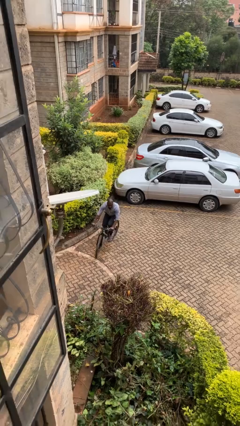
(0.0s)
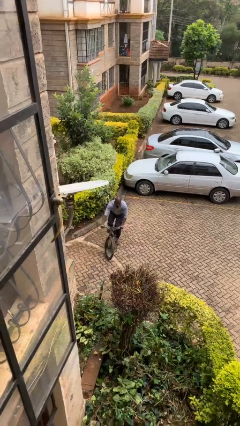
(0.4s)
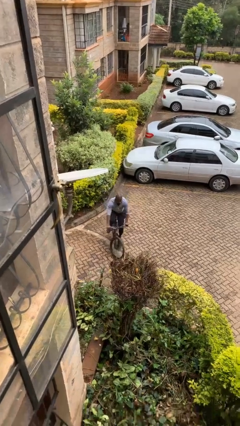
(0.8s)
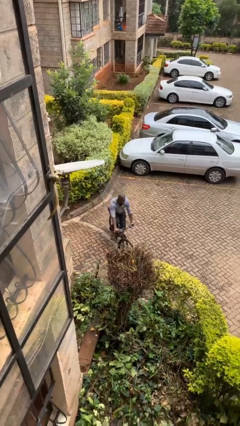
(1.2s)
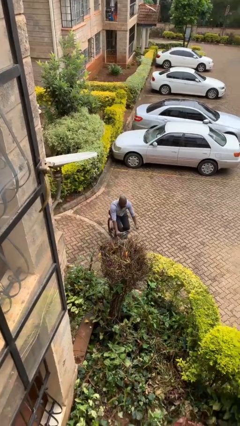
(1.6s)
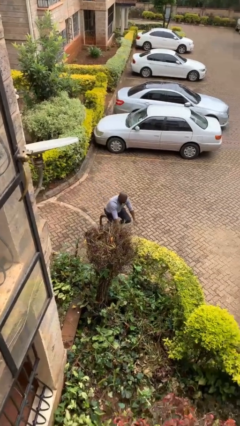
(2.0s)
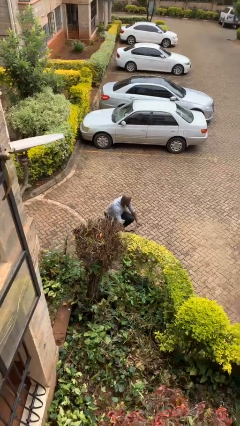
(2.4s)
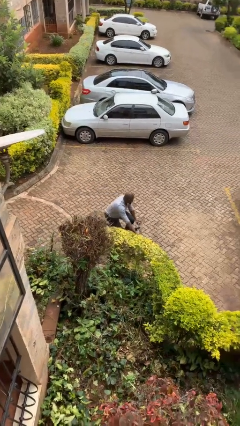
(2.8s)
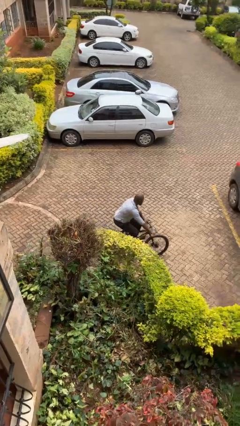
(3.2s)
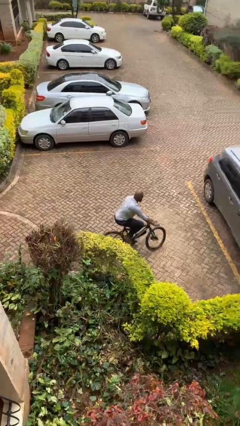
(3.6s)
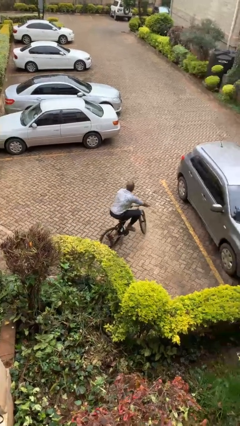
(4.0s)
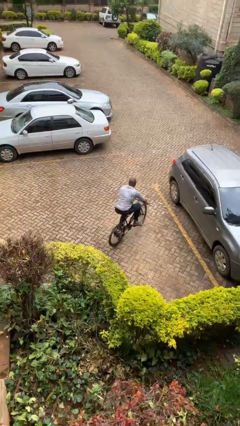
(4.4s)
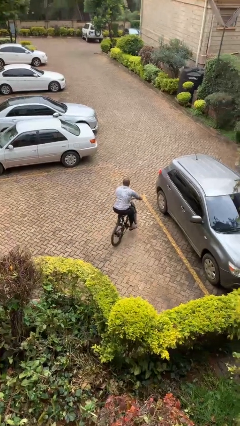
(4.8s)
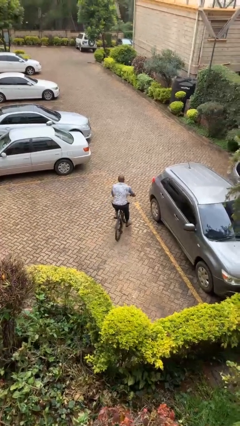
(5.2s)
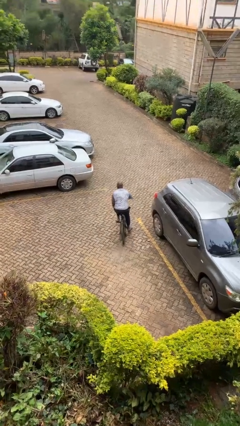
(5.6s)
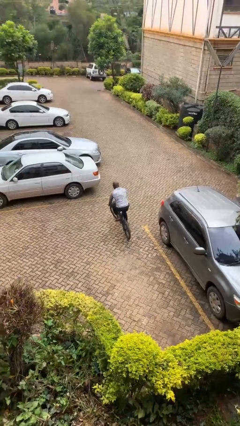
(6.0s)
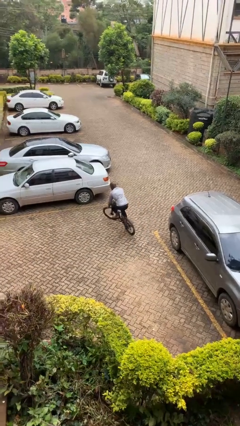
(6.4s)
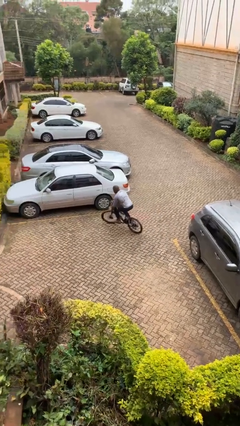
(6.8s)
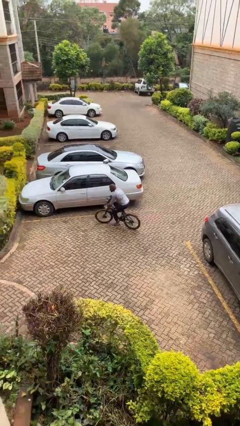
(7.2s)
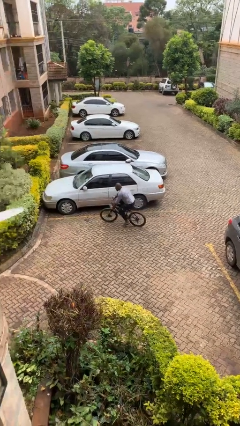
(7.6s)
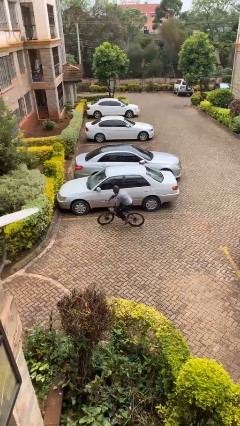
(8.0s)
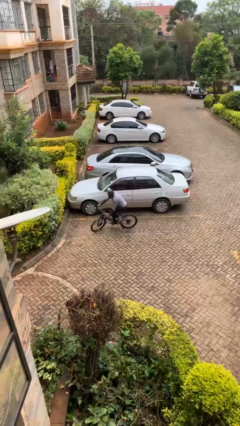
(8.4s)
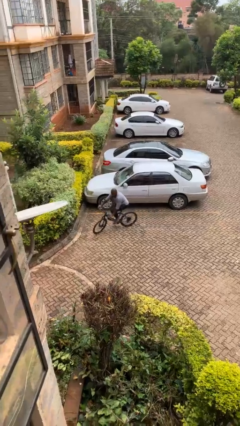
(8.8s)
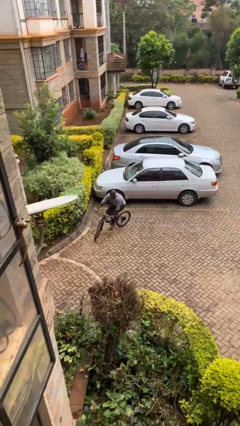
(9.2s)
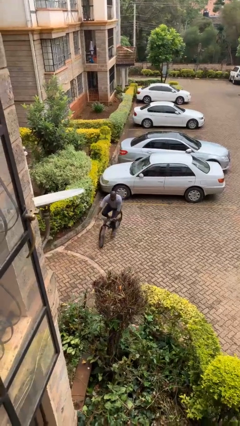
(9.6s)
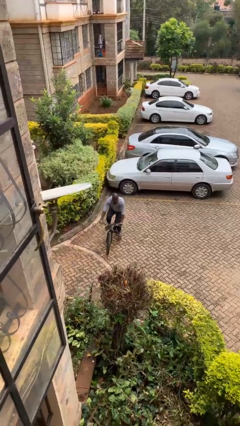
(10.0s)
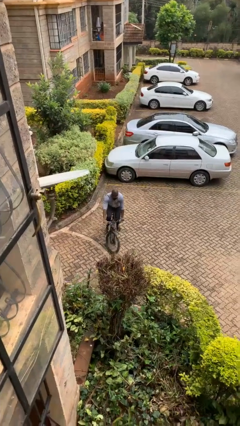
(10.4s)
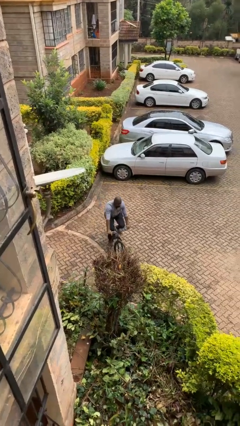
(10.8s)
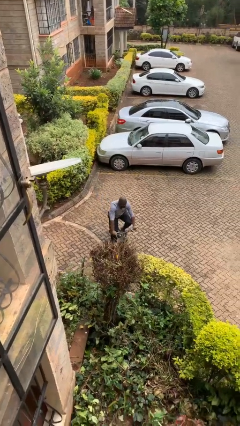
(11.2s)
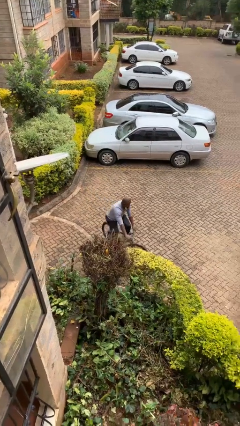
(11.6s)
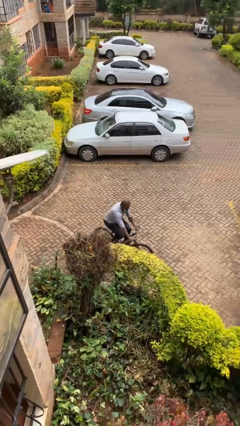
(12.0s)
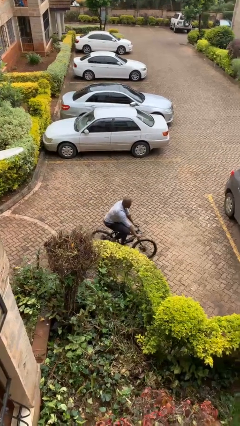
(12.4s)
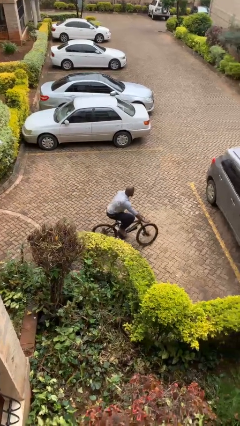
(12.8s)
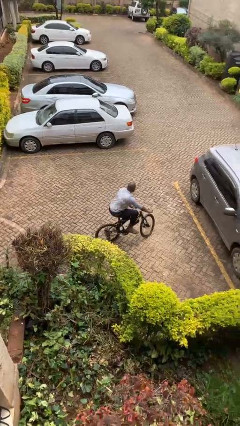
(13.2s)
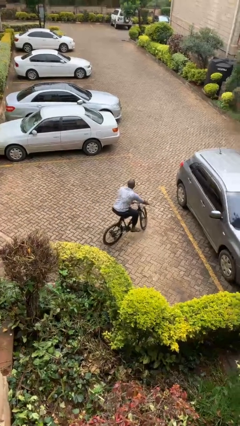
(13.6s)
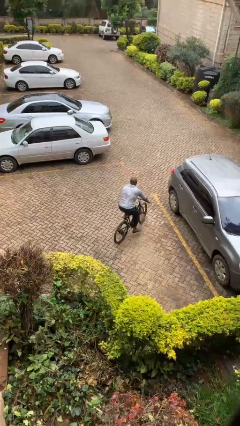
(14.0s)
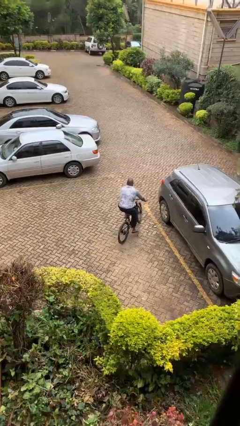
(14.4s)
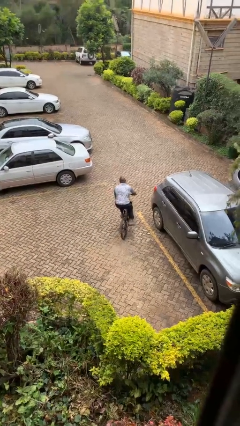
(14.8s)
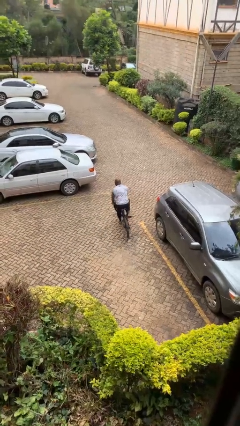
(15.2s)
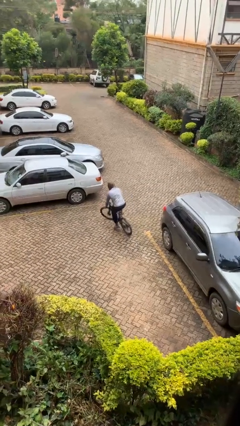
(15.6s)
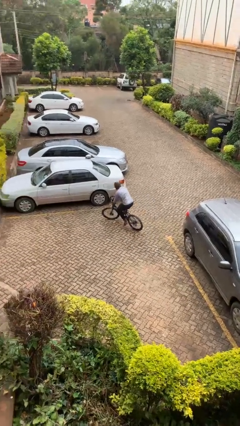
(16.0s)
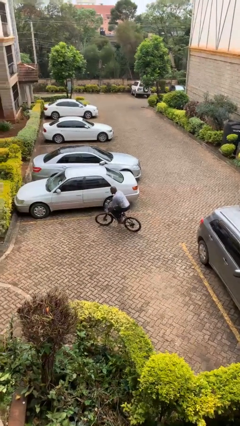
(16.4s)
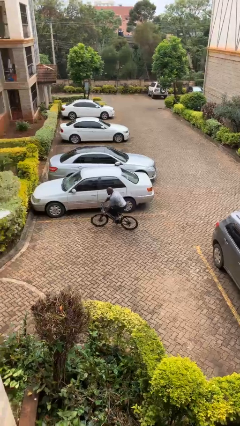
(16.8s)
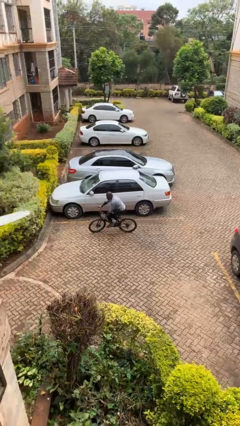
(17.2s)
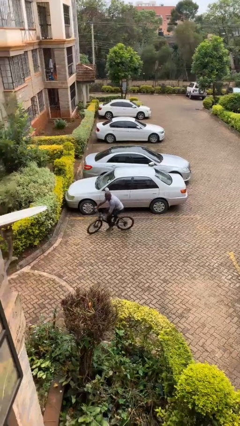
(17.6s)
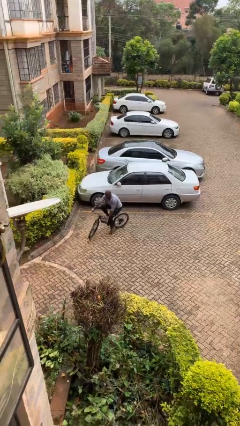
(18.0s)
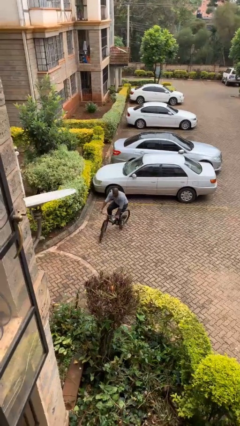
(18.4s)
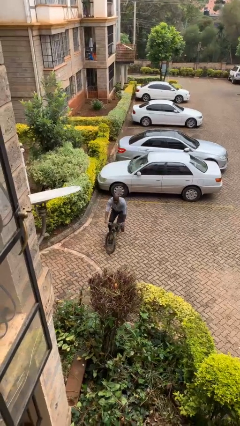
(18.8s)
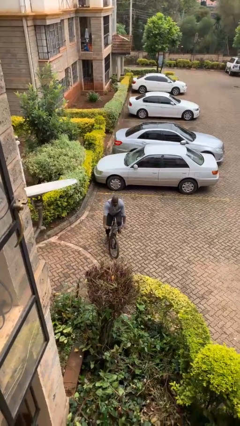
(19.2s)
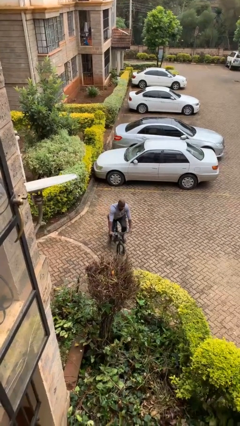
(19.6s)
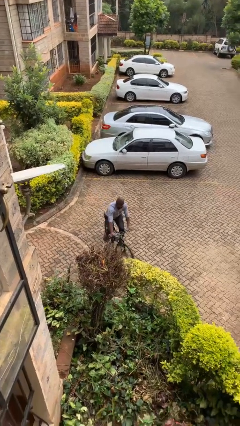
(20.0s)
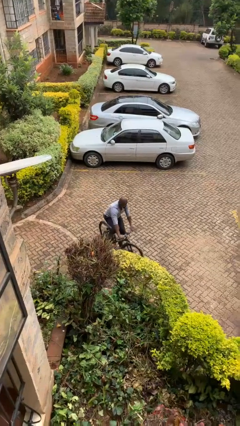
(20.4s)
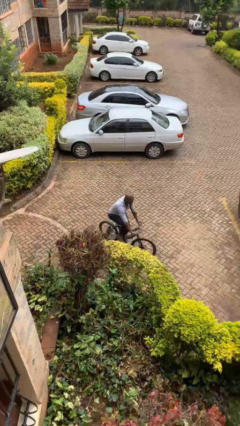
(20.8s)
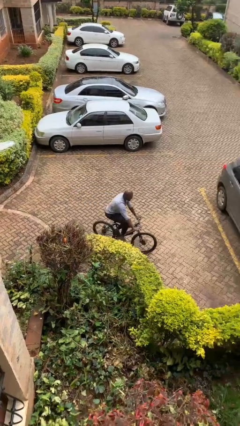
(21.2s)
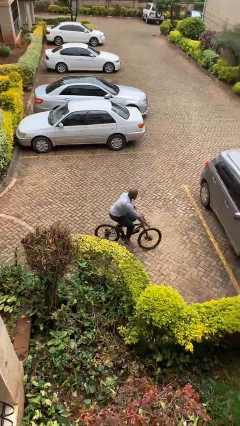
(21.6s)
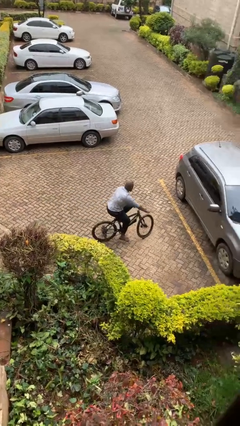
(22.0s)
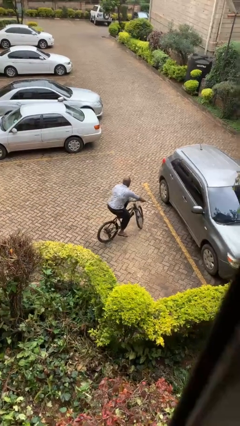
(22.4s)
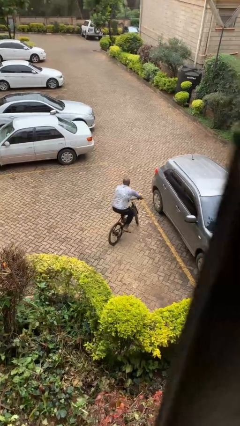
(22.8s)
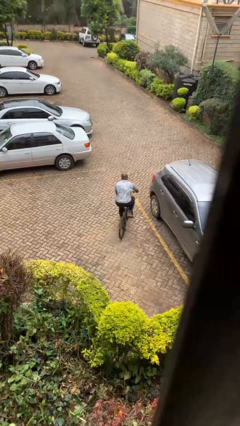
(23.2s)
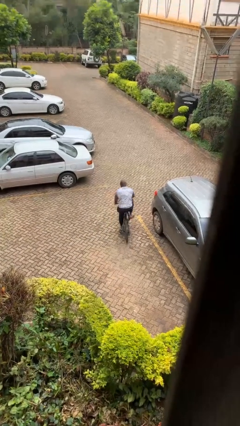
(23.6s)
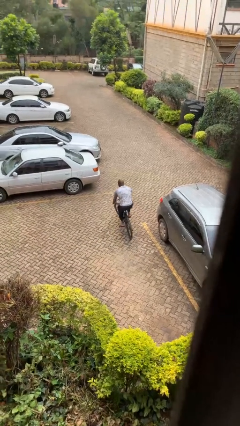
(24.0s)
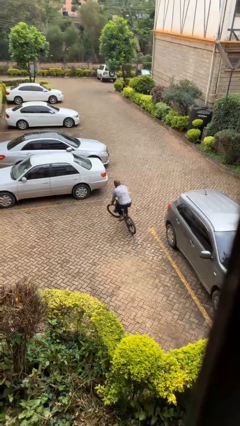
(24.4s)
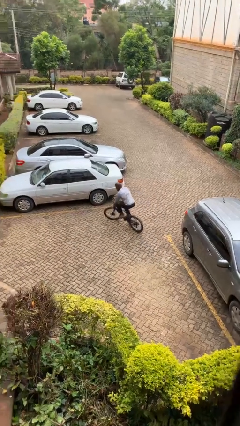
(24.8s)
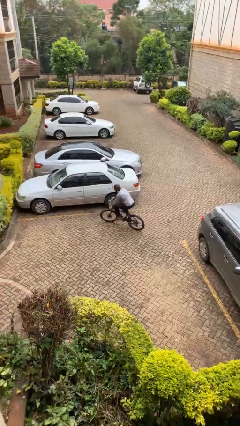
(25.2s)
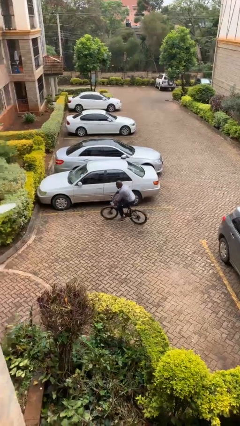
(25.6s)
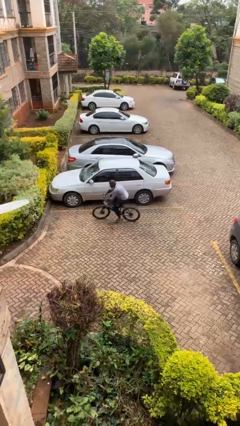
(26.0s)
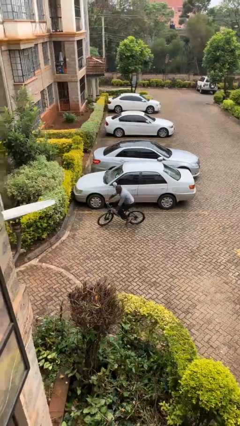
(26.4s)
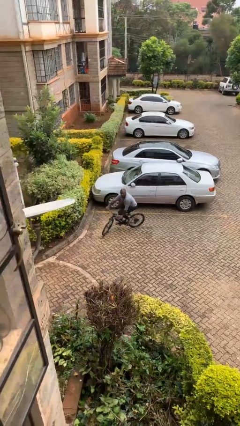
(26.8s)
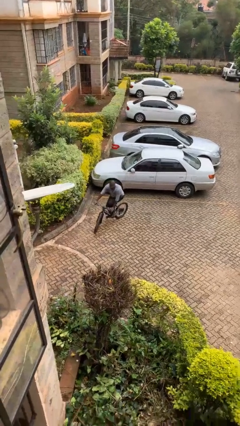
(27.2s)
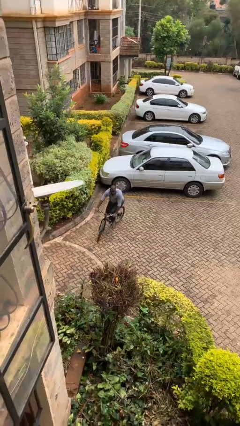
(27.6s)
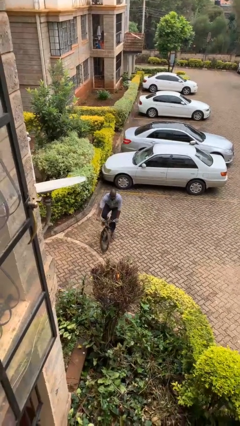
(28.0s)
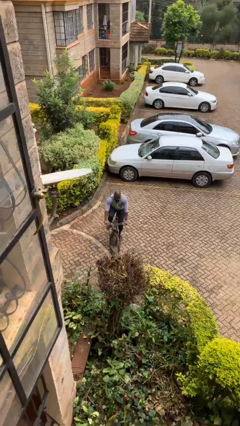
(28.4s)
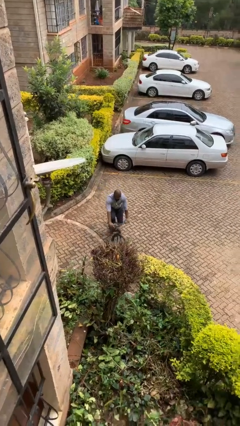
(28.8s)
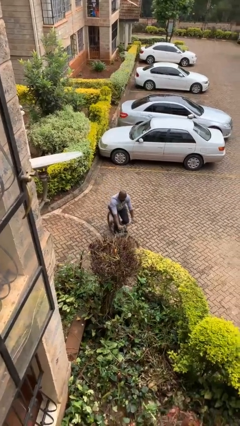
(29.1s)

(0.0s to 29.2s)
person rides bicycle

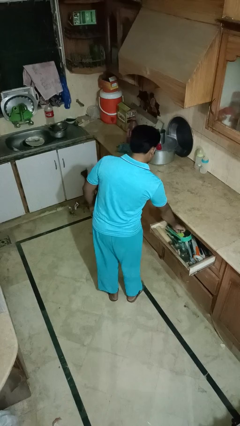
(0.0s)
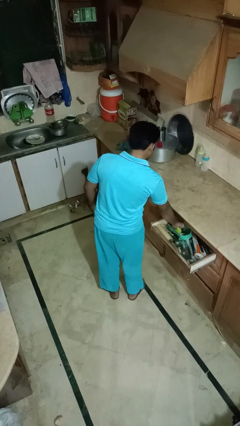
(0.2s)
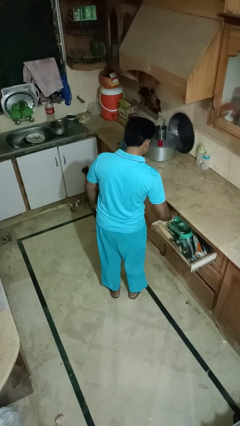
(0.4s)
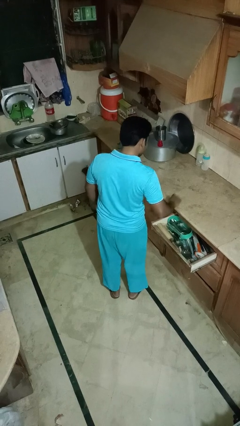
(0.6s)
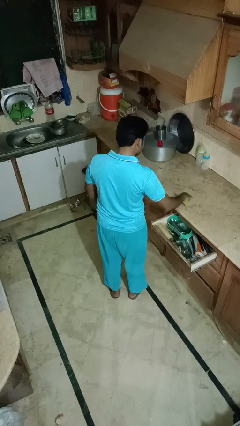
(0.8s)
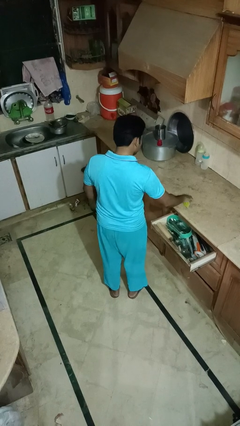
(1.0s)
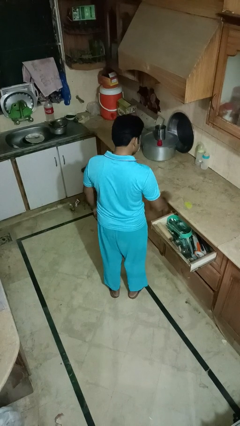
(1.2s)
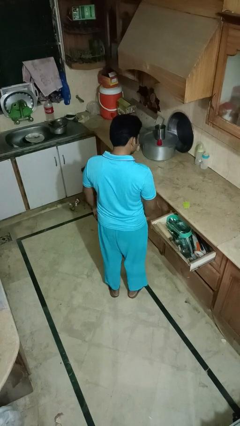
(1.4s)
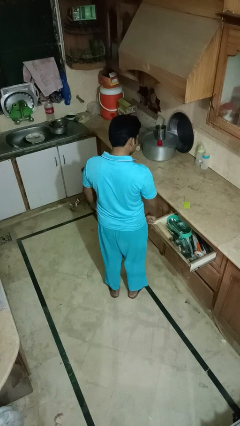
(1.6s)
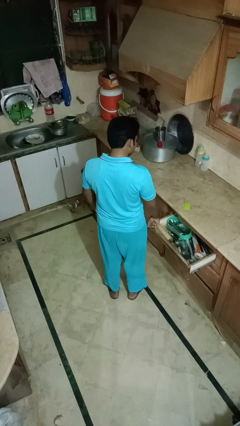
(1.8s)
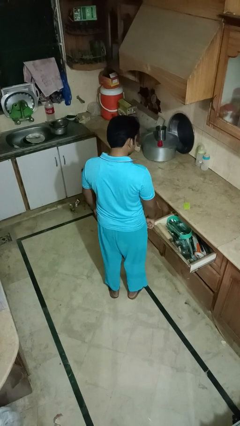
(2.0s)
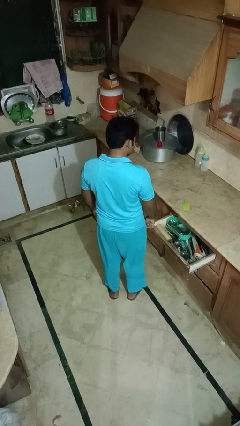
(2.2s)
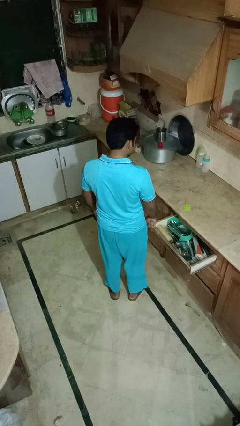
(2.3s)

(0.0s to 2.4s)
person takes object from kitchen drawer

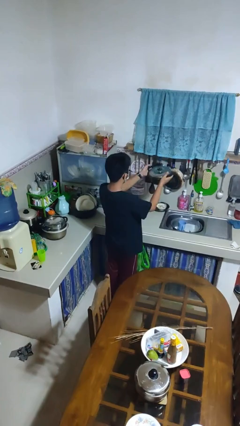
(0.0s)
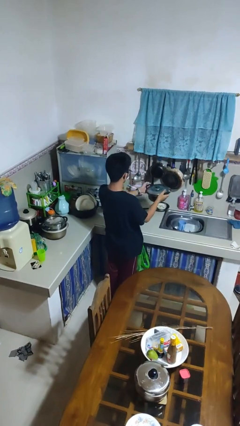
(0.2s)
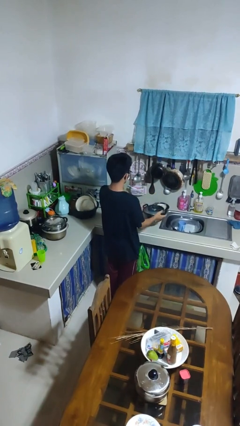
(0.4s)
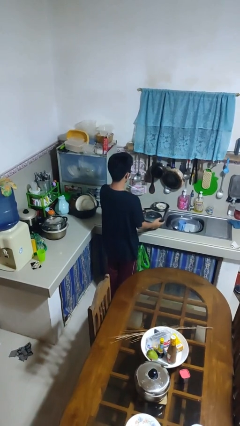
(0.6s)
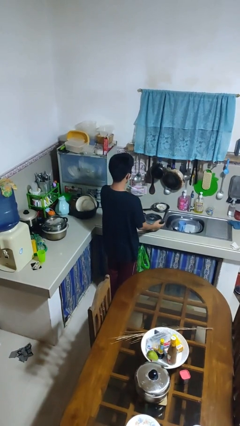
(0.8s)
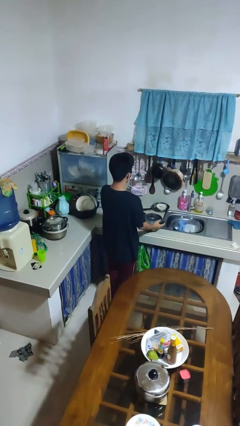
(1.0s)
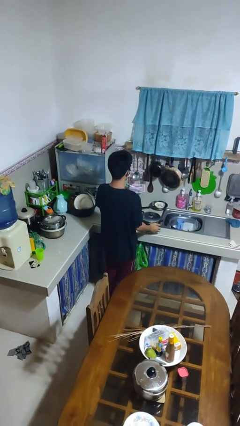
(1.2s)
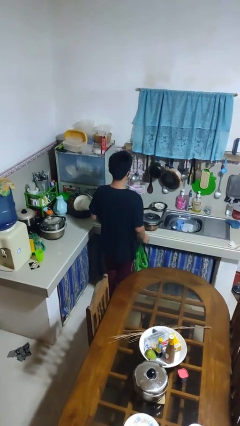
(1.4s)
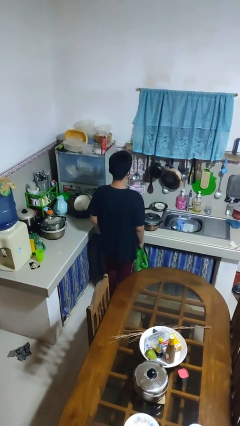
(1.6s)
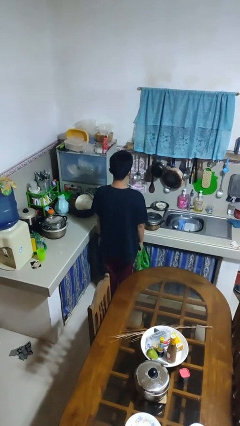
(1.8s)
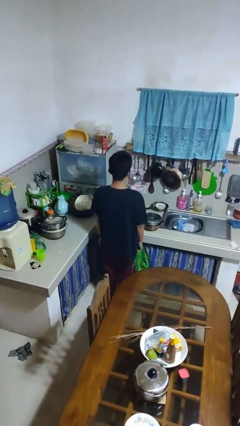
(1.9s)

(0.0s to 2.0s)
person puts down object on countertop
